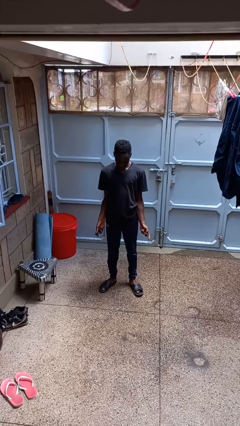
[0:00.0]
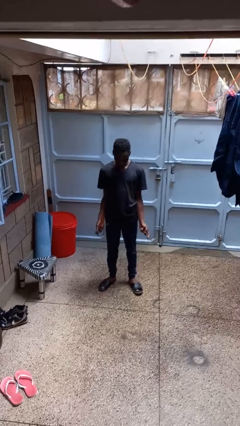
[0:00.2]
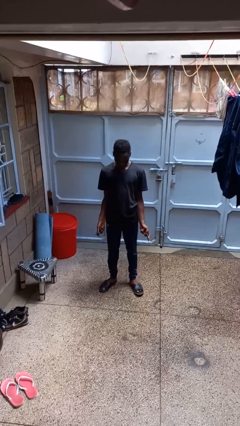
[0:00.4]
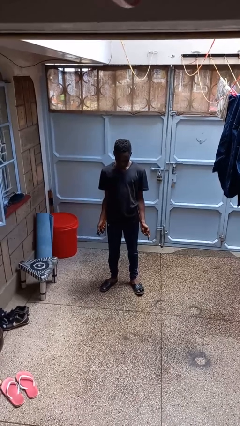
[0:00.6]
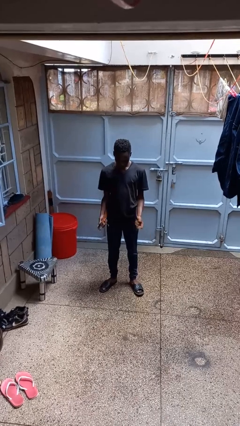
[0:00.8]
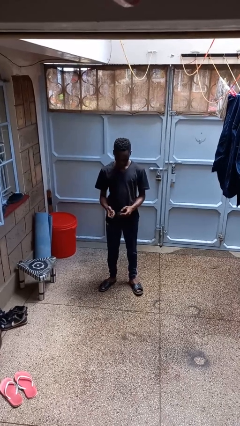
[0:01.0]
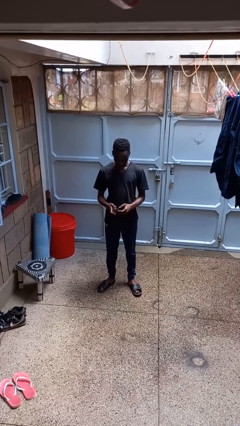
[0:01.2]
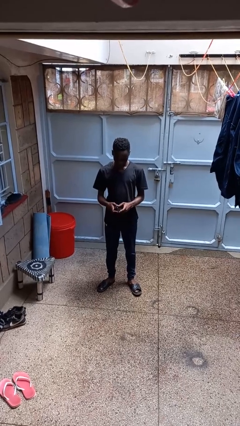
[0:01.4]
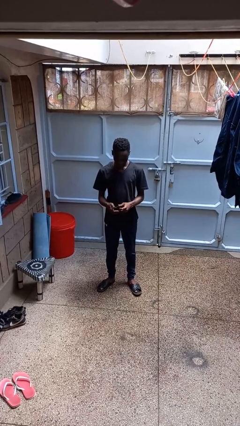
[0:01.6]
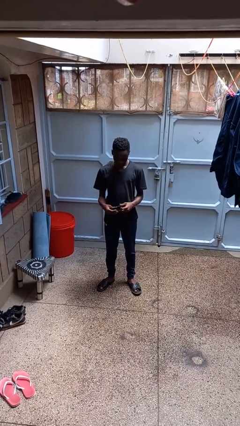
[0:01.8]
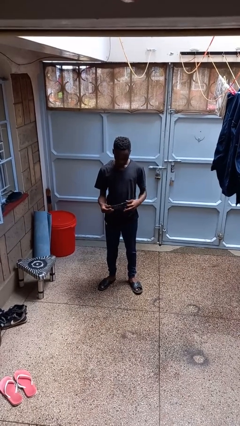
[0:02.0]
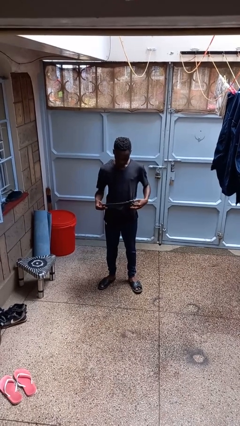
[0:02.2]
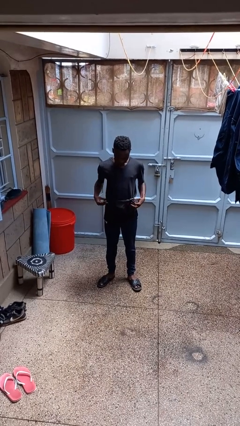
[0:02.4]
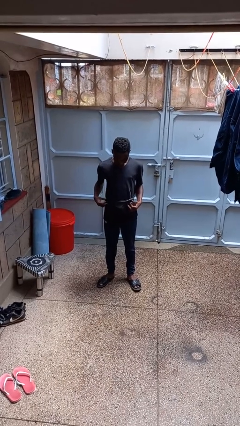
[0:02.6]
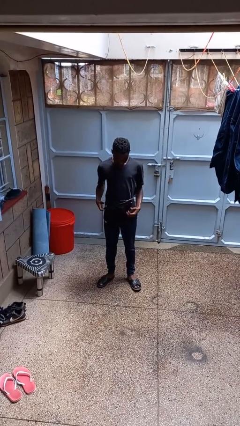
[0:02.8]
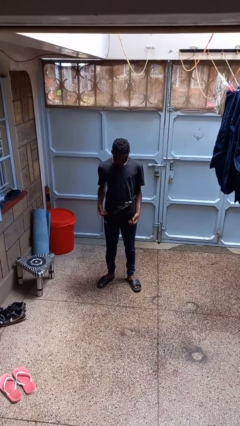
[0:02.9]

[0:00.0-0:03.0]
person puts on belt

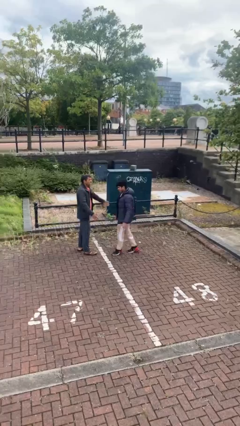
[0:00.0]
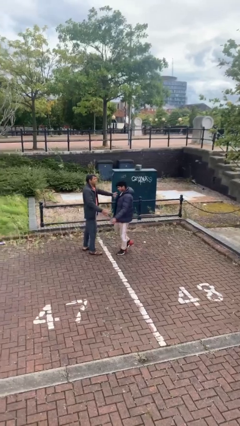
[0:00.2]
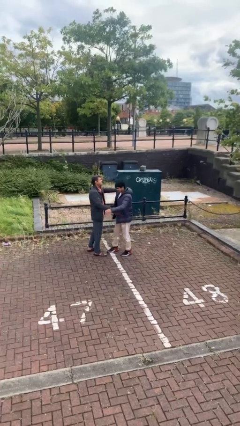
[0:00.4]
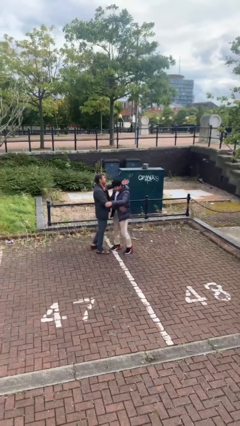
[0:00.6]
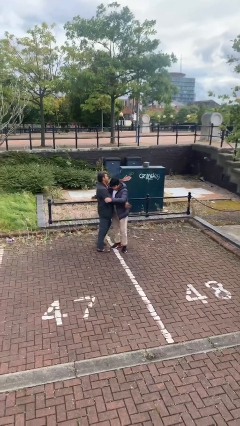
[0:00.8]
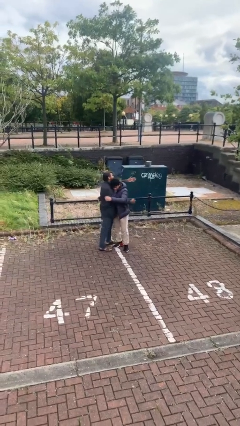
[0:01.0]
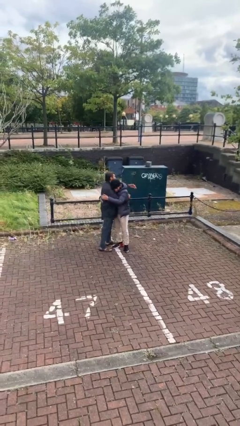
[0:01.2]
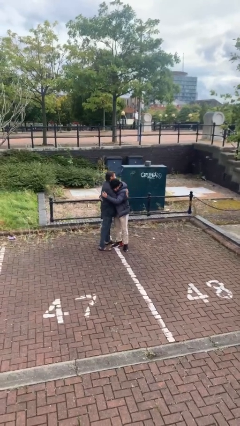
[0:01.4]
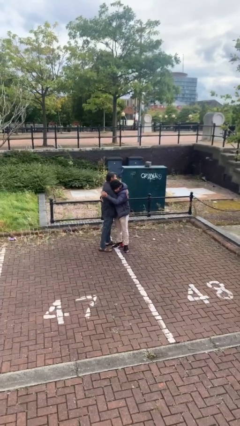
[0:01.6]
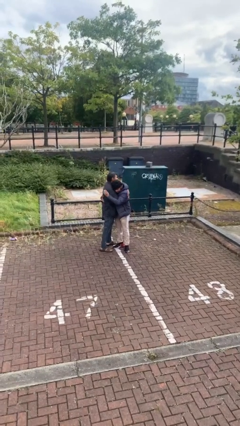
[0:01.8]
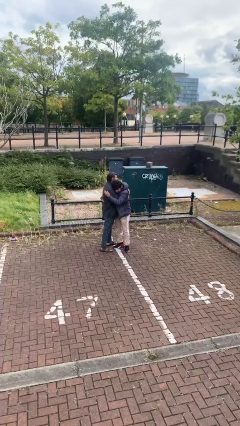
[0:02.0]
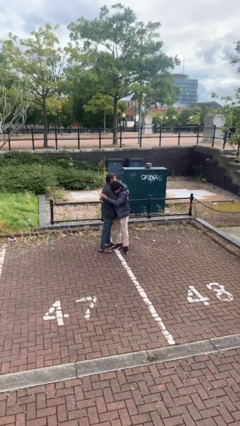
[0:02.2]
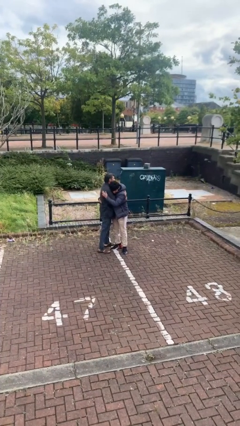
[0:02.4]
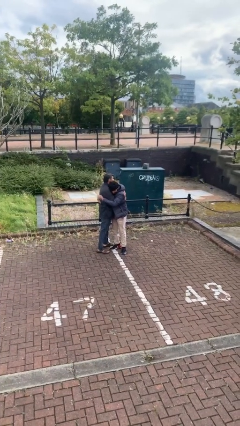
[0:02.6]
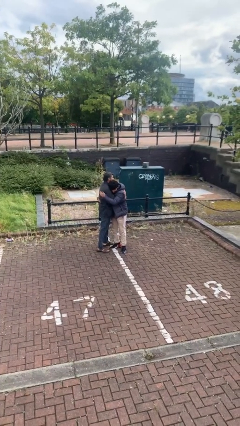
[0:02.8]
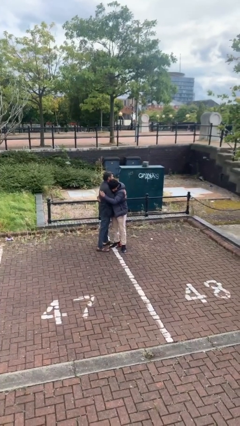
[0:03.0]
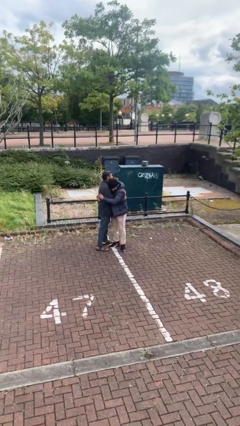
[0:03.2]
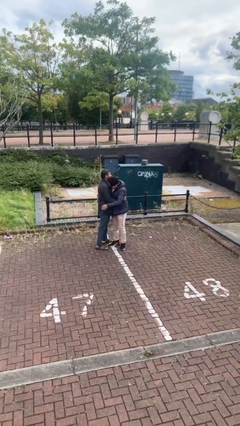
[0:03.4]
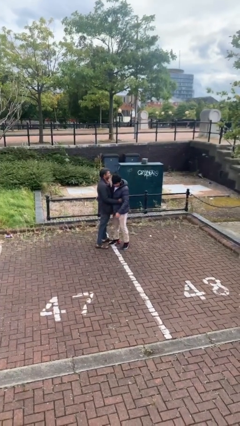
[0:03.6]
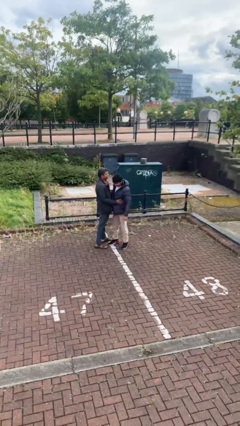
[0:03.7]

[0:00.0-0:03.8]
person embraces person

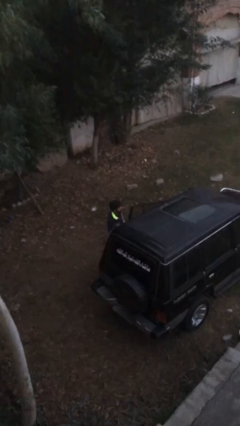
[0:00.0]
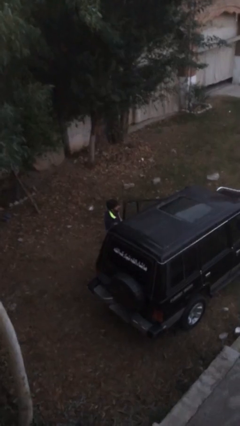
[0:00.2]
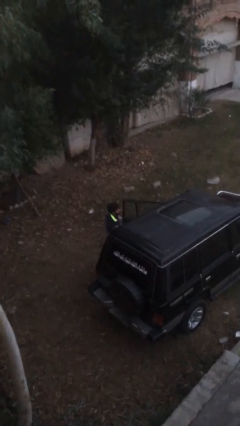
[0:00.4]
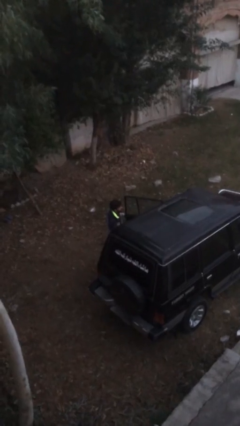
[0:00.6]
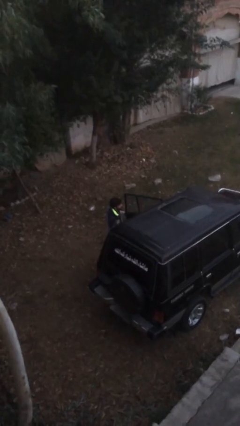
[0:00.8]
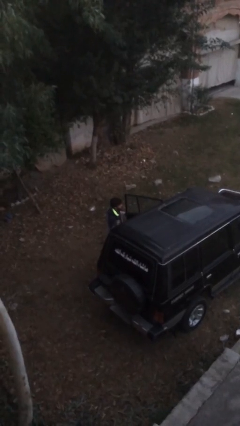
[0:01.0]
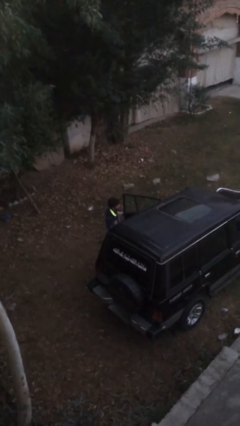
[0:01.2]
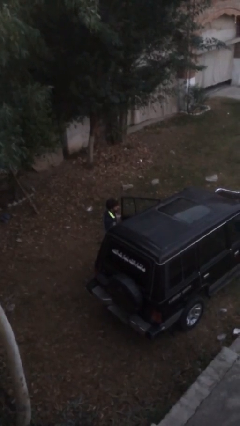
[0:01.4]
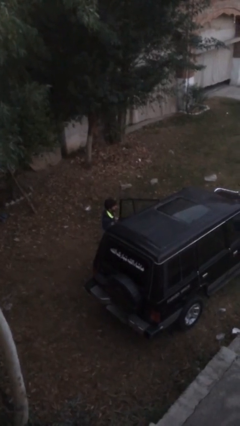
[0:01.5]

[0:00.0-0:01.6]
person opens car door

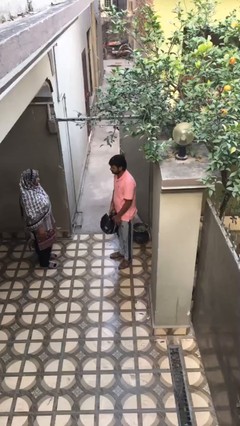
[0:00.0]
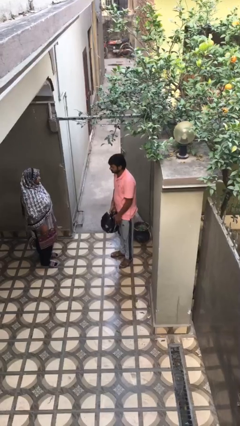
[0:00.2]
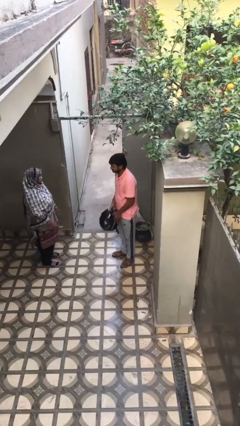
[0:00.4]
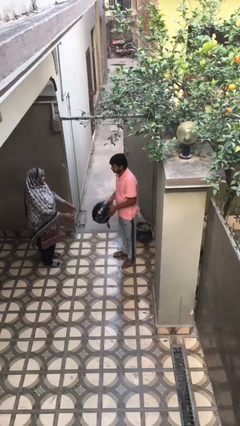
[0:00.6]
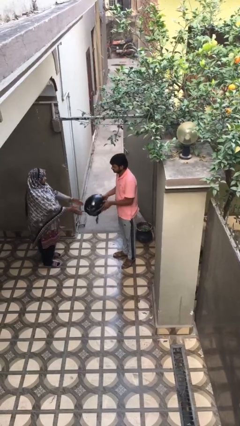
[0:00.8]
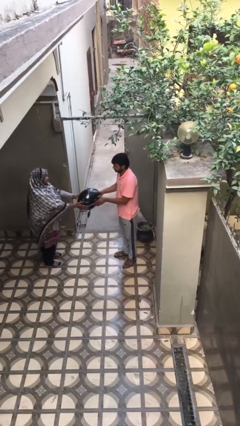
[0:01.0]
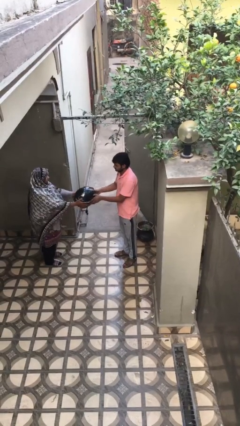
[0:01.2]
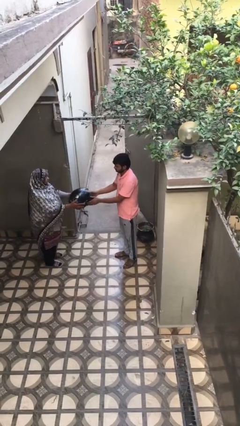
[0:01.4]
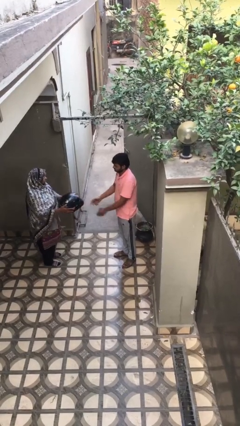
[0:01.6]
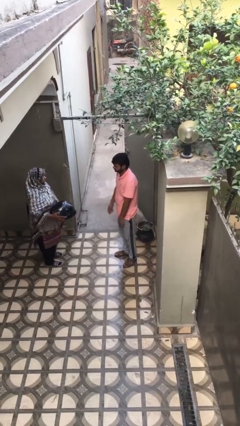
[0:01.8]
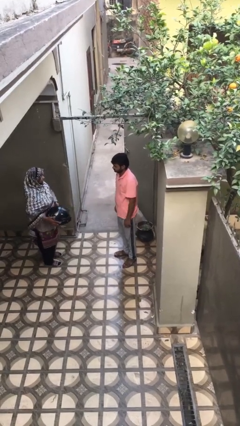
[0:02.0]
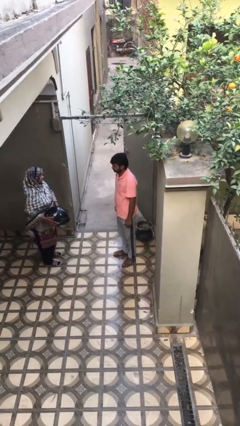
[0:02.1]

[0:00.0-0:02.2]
person transfers object to person

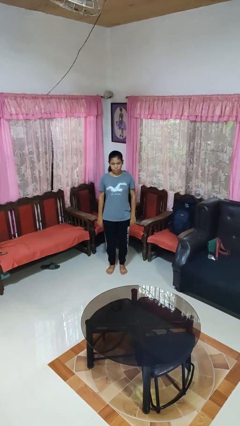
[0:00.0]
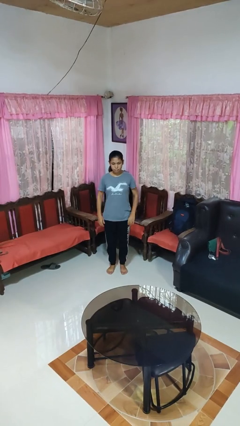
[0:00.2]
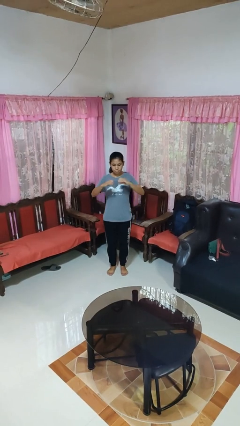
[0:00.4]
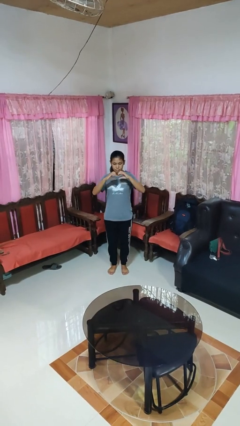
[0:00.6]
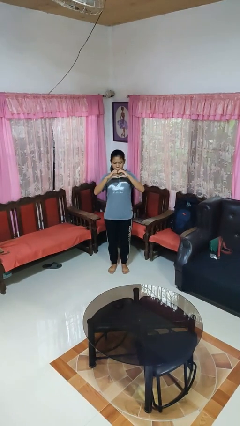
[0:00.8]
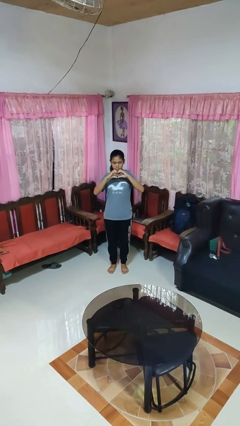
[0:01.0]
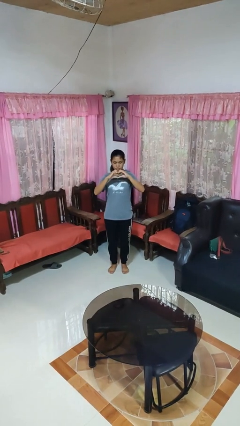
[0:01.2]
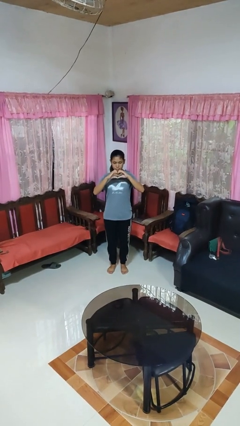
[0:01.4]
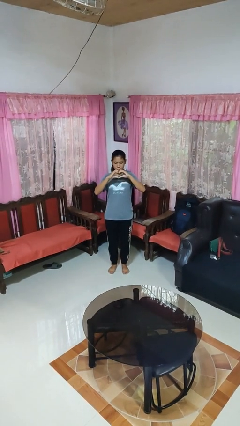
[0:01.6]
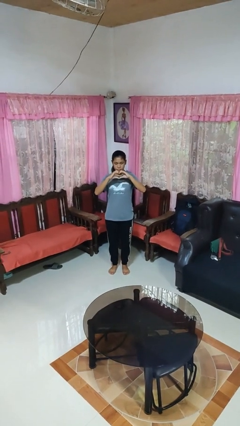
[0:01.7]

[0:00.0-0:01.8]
person gestures heart

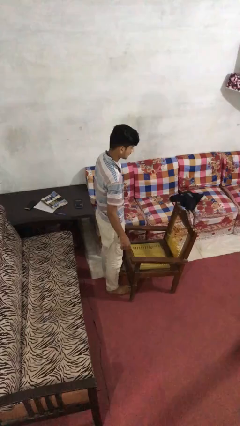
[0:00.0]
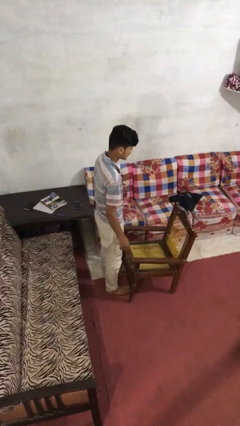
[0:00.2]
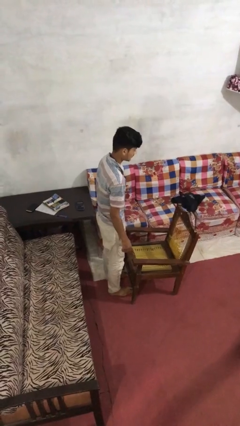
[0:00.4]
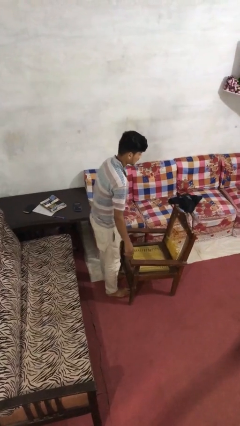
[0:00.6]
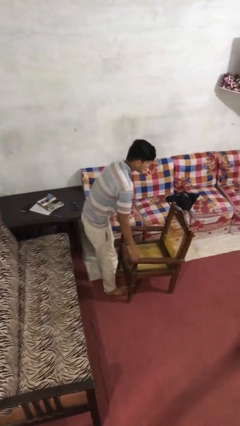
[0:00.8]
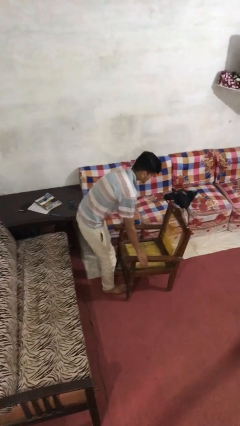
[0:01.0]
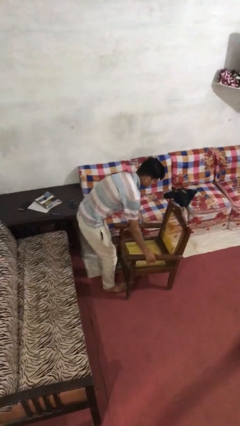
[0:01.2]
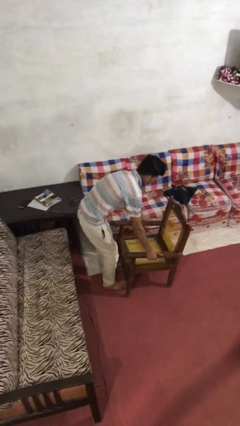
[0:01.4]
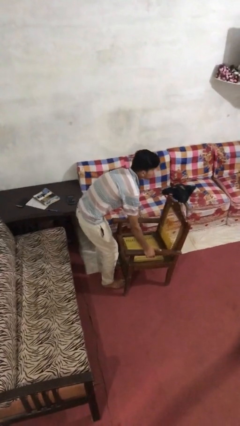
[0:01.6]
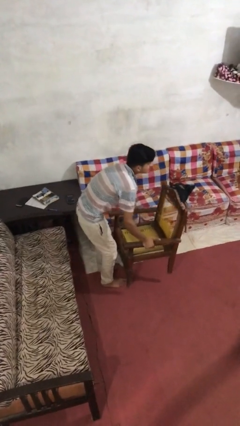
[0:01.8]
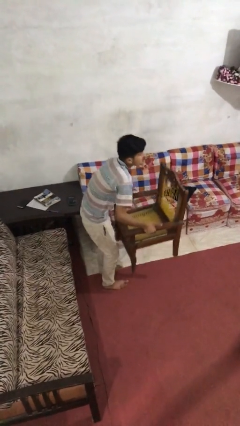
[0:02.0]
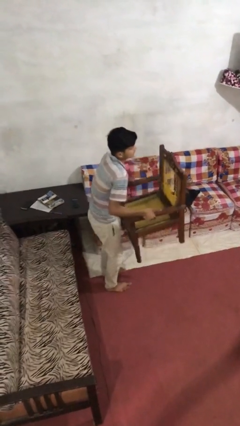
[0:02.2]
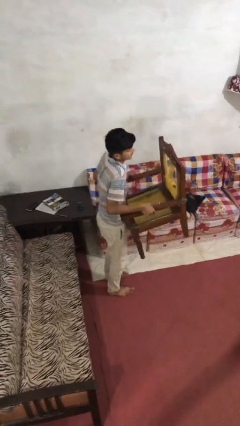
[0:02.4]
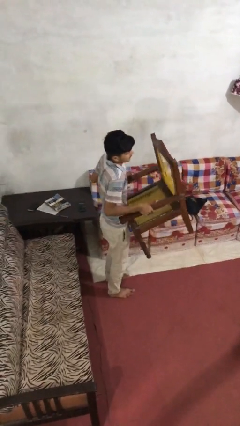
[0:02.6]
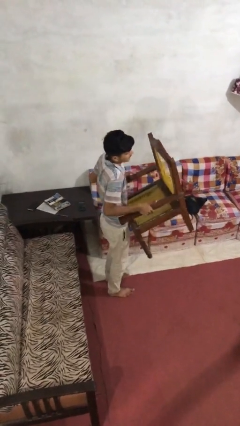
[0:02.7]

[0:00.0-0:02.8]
person picks up object from floor

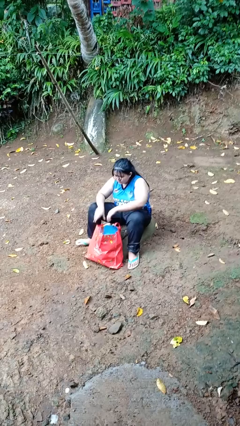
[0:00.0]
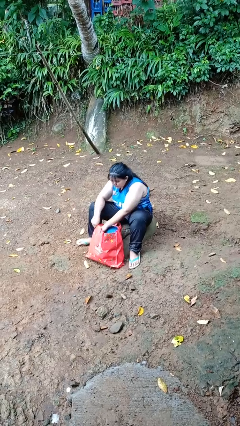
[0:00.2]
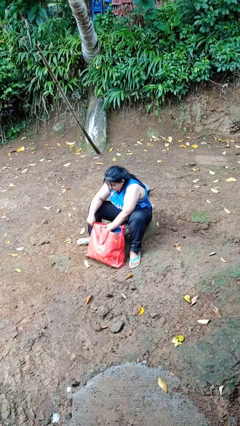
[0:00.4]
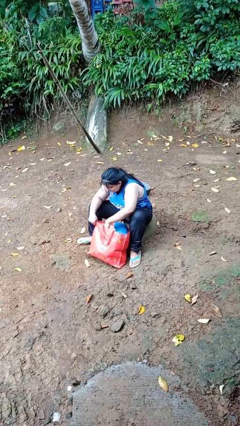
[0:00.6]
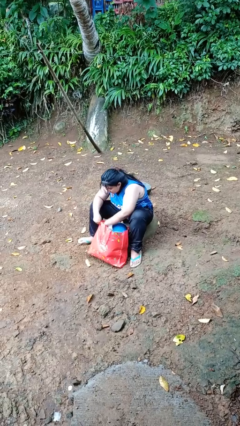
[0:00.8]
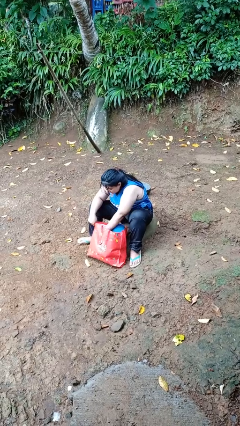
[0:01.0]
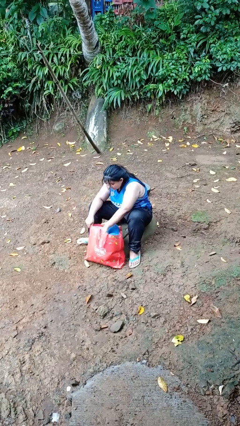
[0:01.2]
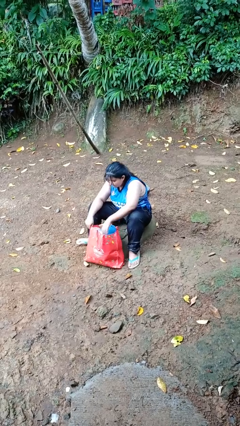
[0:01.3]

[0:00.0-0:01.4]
person searches in bag

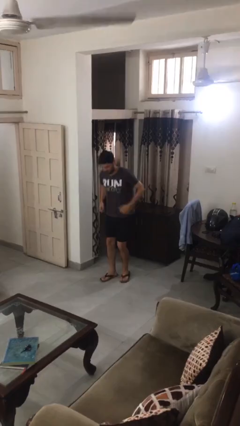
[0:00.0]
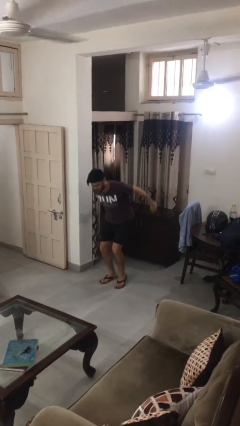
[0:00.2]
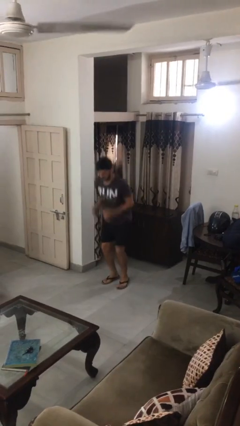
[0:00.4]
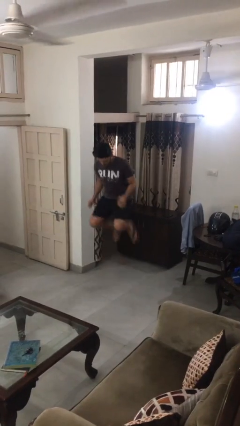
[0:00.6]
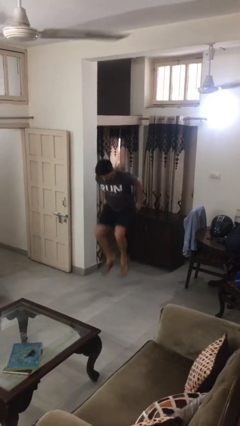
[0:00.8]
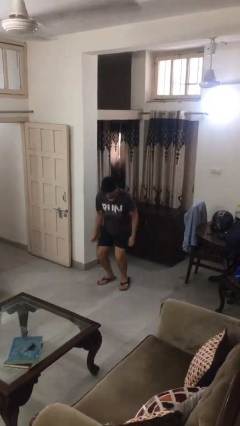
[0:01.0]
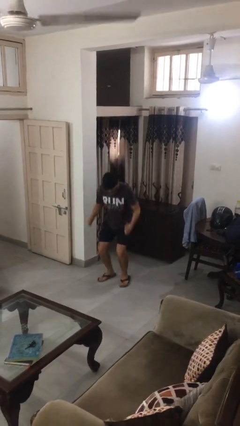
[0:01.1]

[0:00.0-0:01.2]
person jumps
